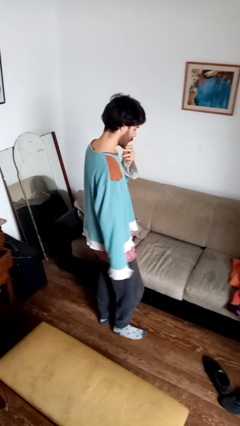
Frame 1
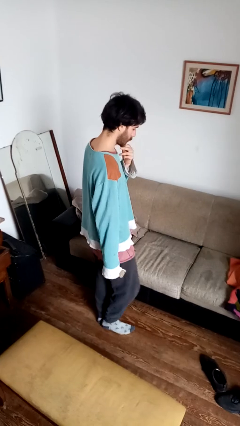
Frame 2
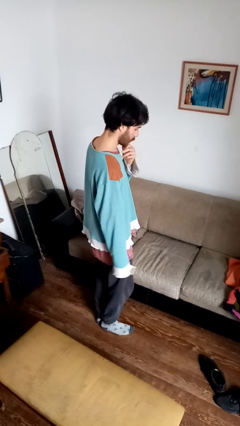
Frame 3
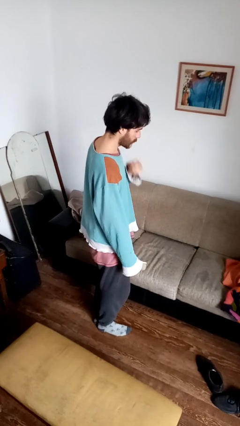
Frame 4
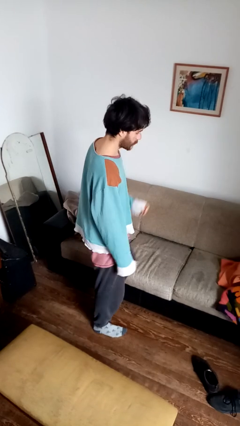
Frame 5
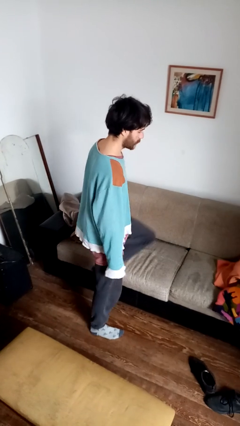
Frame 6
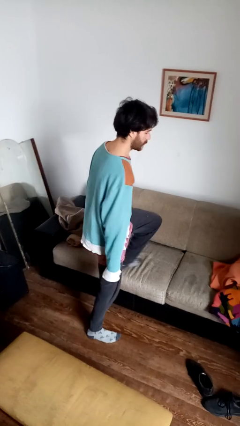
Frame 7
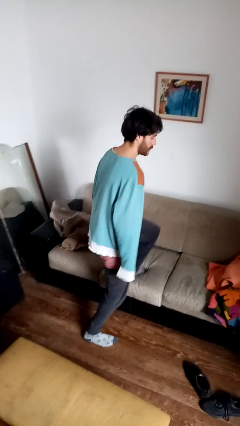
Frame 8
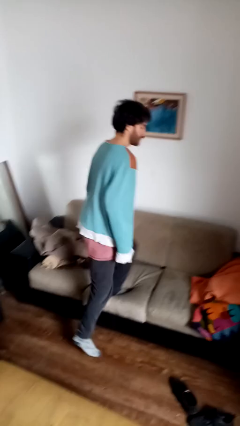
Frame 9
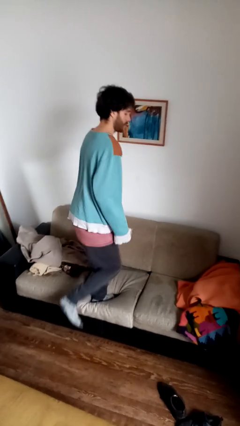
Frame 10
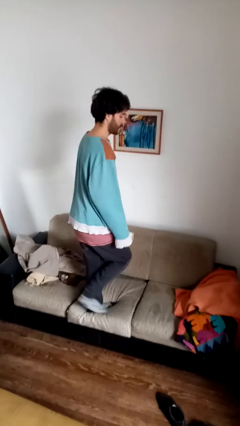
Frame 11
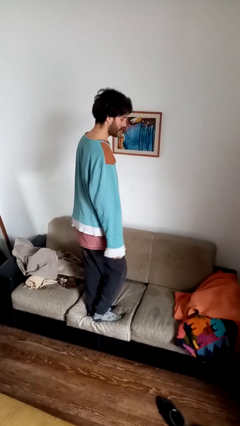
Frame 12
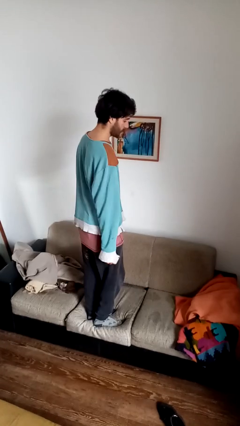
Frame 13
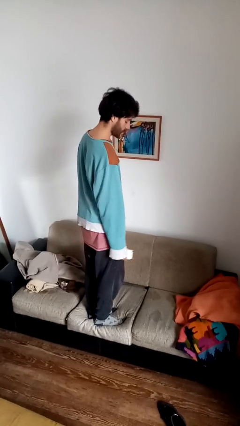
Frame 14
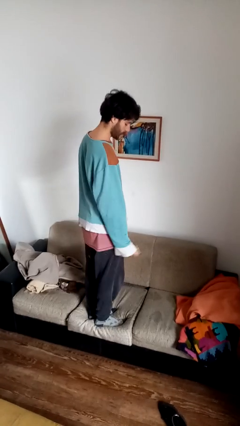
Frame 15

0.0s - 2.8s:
person climbs on couch

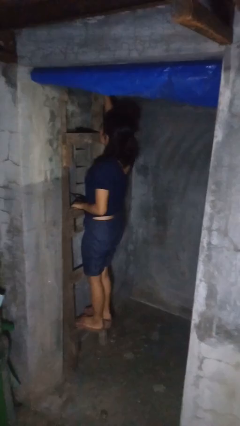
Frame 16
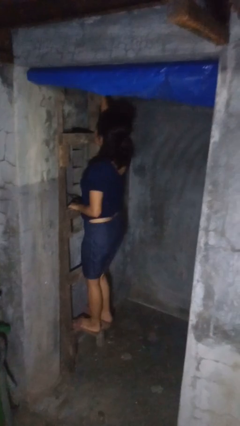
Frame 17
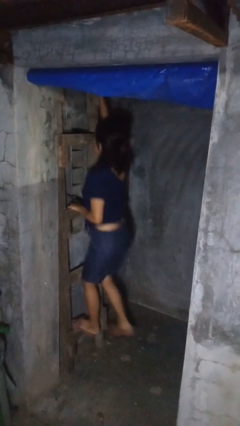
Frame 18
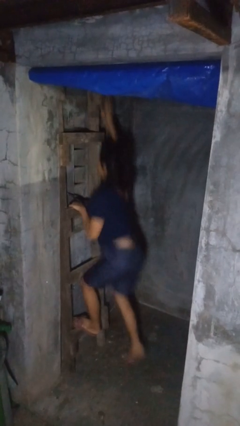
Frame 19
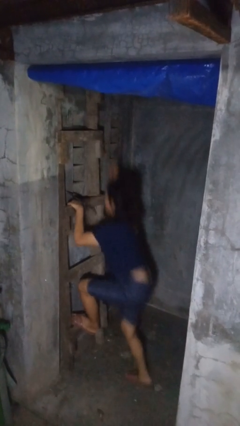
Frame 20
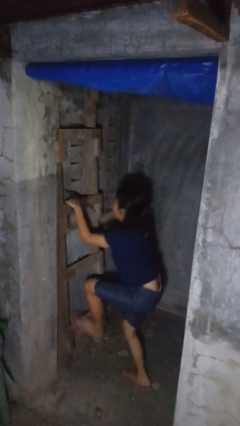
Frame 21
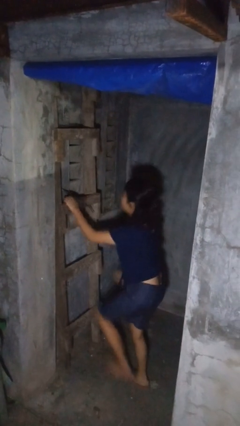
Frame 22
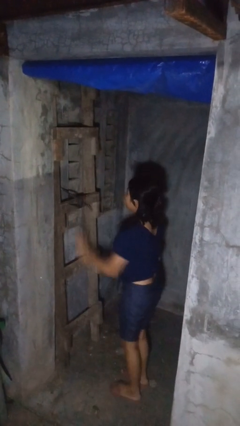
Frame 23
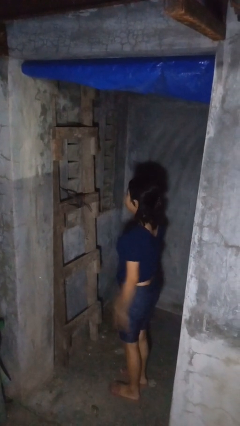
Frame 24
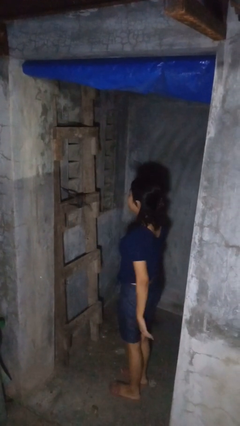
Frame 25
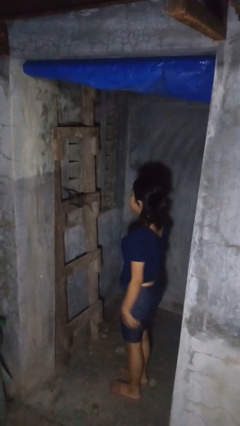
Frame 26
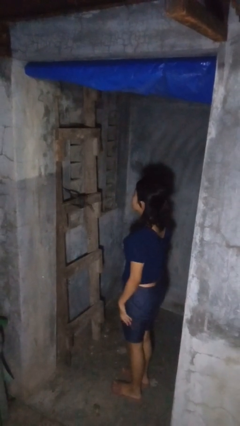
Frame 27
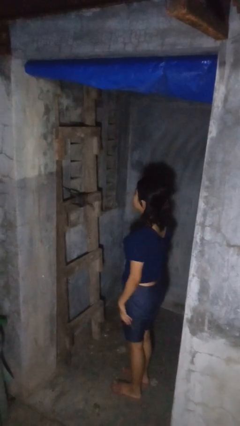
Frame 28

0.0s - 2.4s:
person climbs down ladder

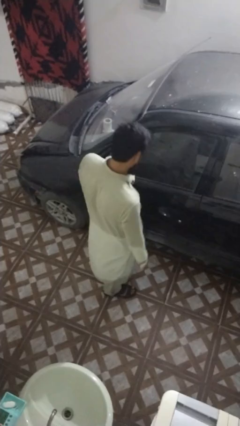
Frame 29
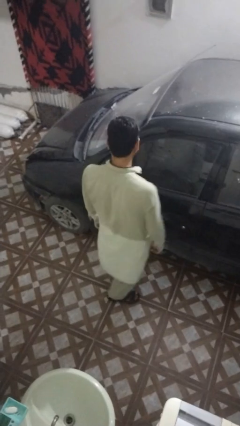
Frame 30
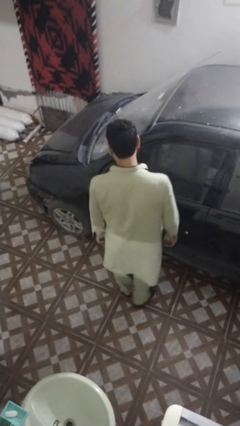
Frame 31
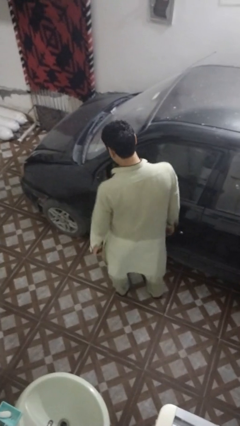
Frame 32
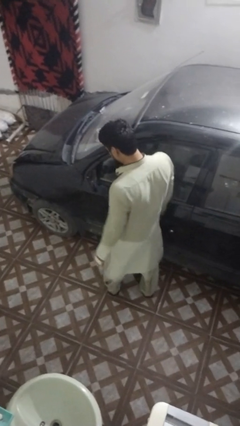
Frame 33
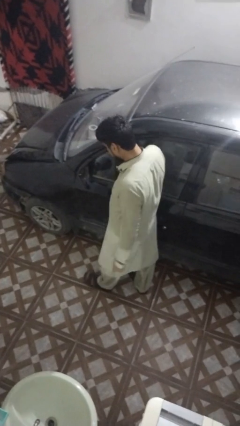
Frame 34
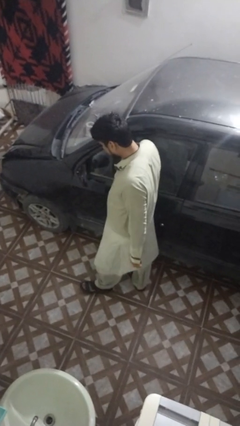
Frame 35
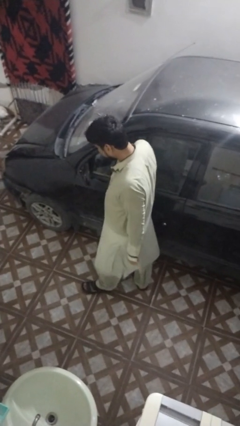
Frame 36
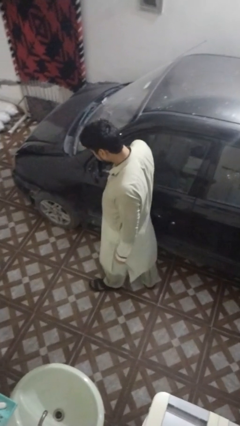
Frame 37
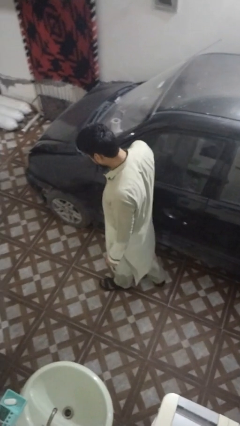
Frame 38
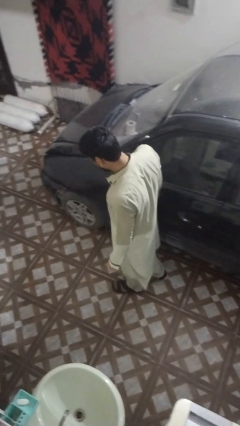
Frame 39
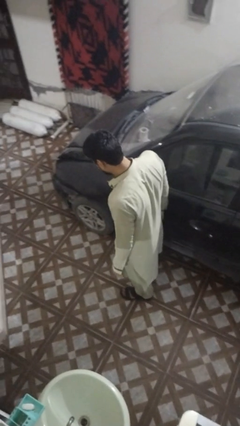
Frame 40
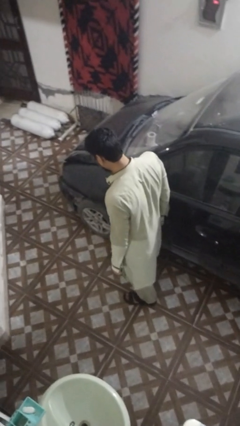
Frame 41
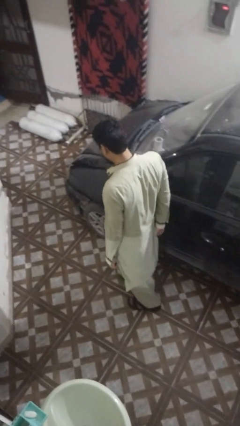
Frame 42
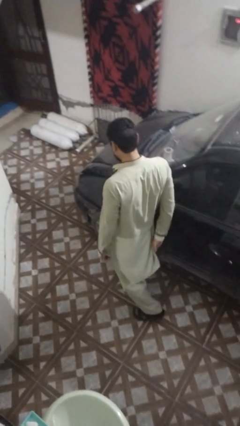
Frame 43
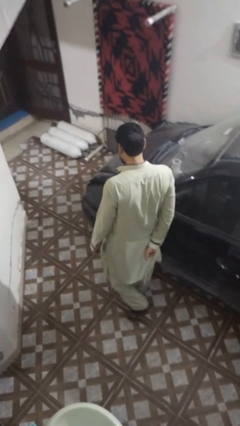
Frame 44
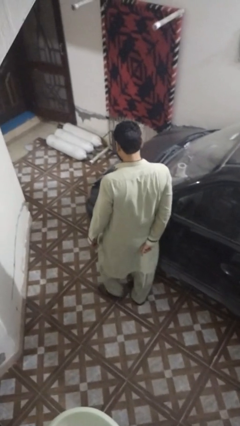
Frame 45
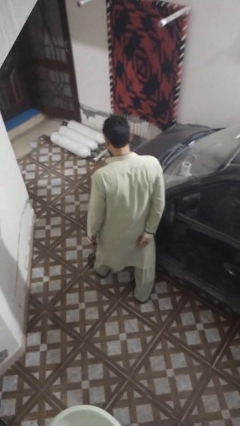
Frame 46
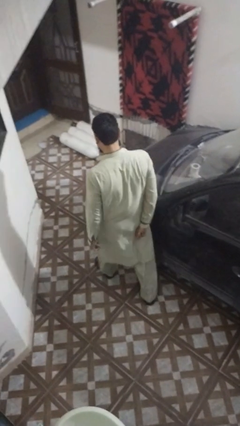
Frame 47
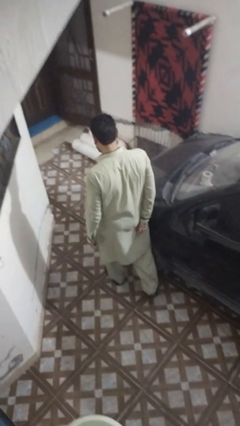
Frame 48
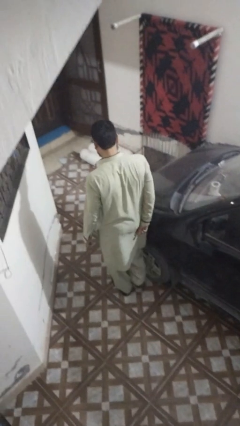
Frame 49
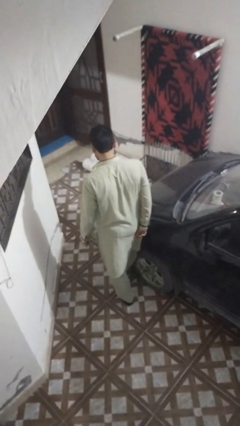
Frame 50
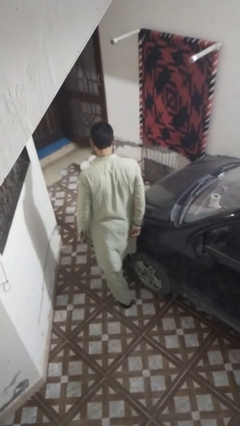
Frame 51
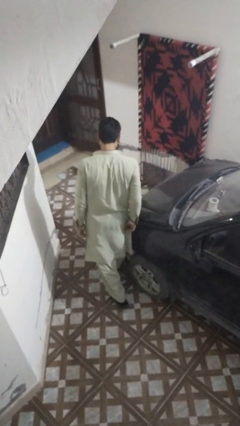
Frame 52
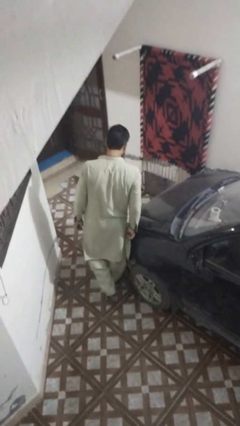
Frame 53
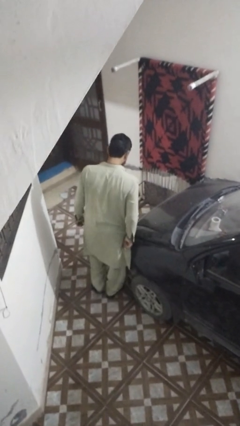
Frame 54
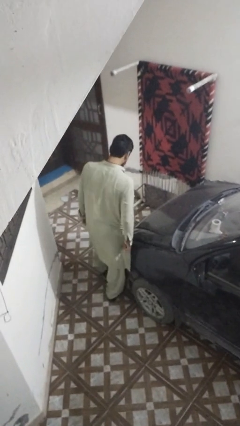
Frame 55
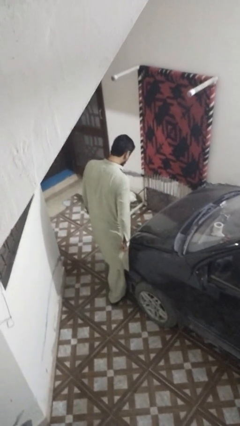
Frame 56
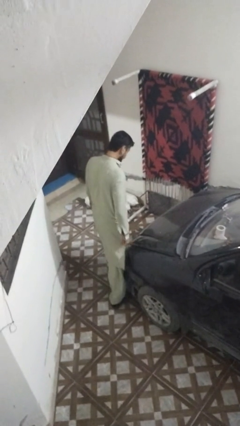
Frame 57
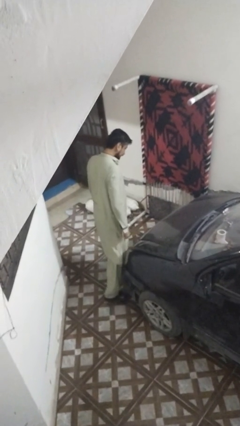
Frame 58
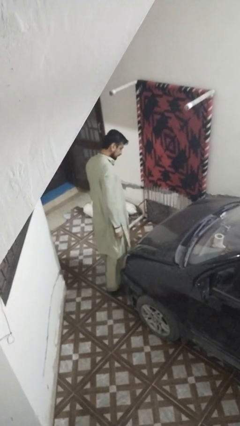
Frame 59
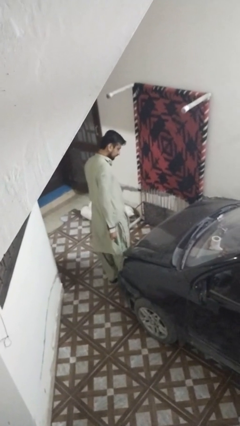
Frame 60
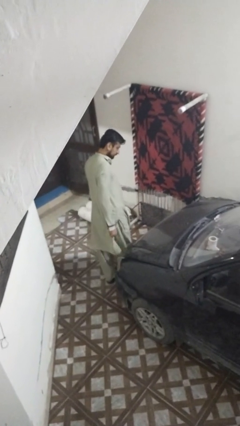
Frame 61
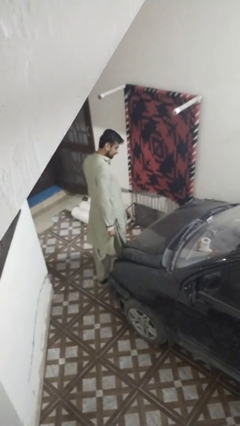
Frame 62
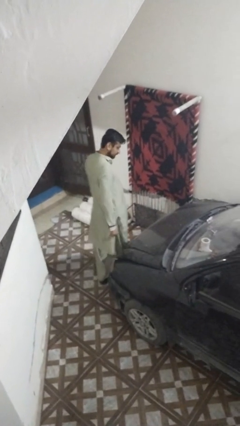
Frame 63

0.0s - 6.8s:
person walks around car

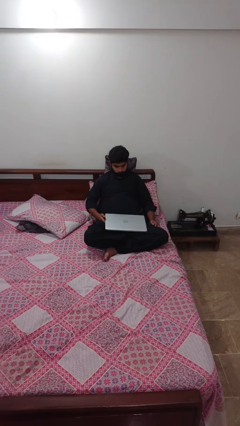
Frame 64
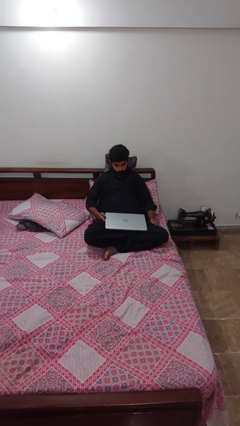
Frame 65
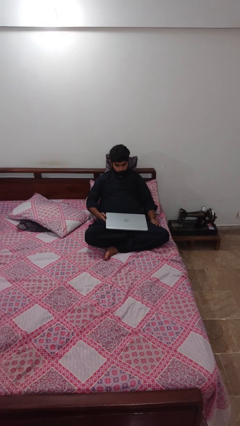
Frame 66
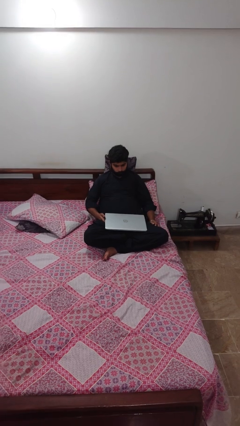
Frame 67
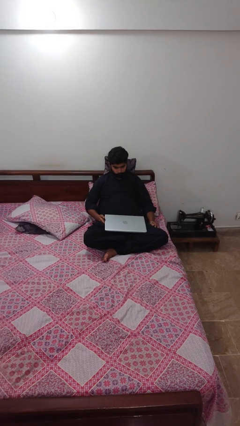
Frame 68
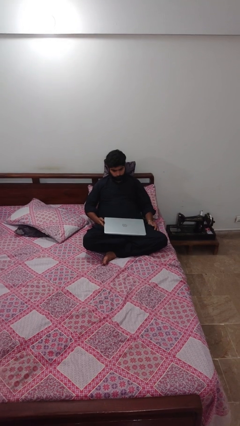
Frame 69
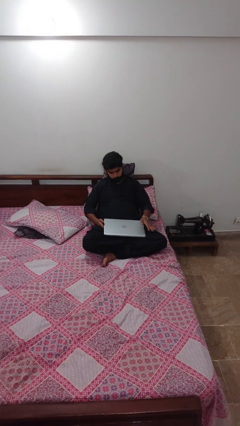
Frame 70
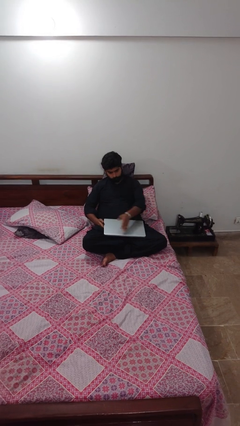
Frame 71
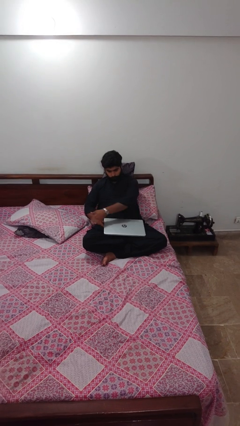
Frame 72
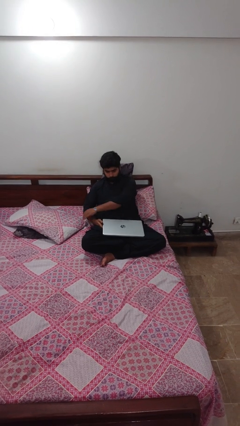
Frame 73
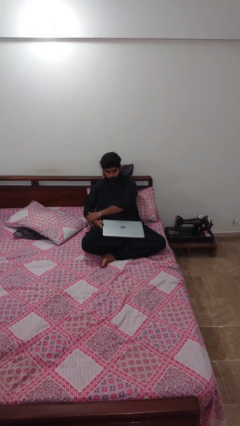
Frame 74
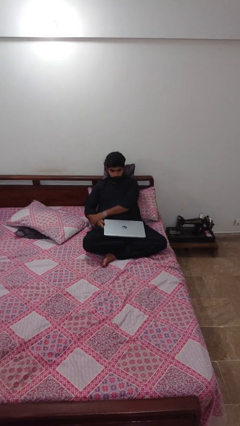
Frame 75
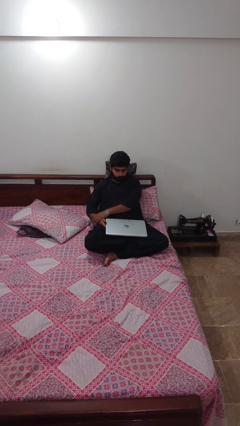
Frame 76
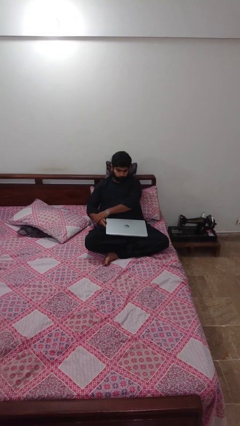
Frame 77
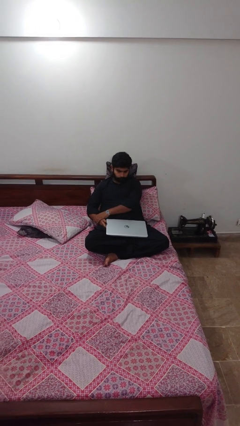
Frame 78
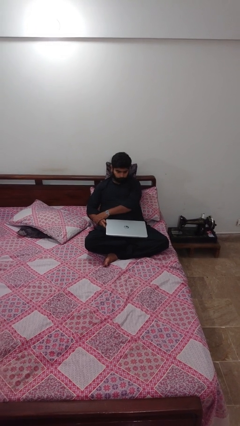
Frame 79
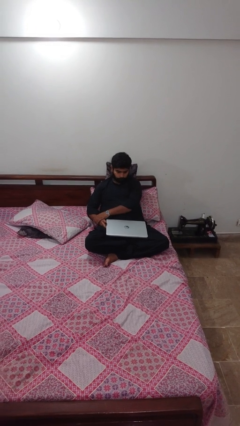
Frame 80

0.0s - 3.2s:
person waves hand over object

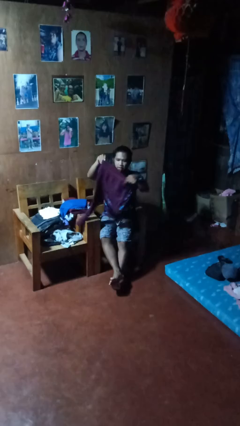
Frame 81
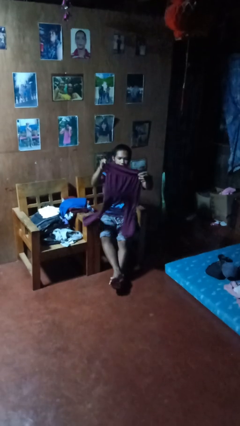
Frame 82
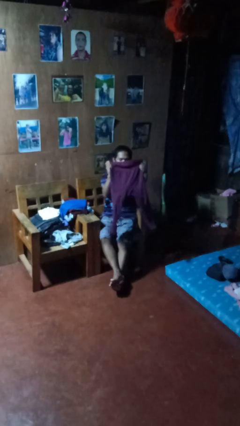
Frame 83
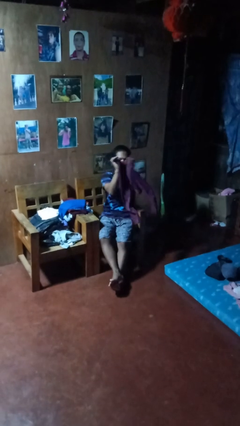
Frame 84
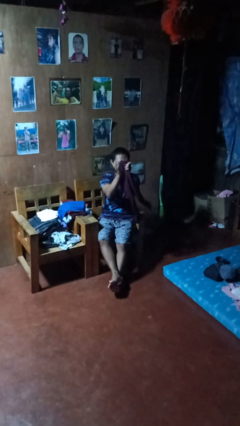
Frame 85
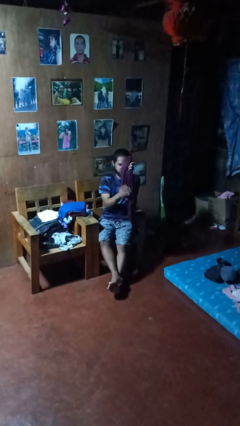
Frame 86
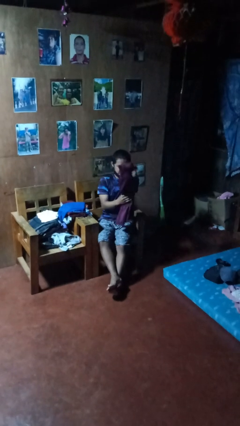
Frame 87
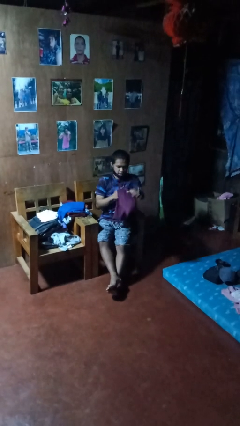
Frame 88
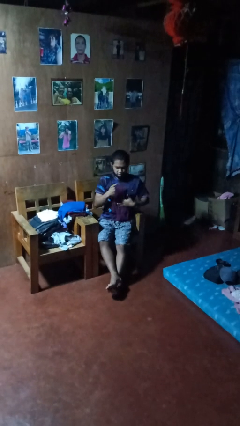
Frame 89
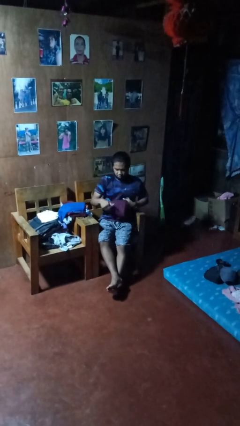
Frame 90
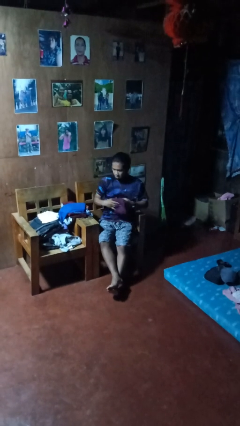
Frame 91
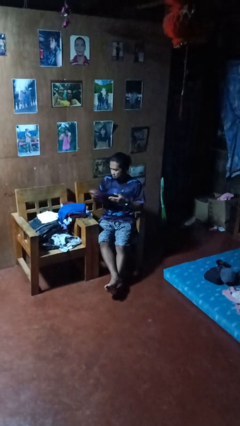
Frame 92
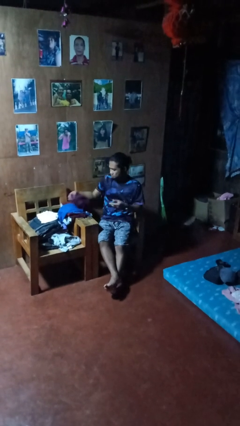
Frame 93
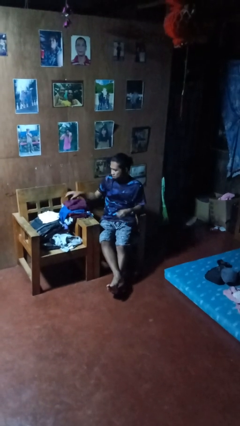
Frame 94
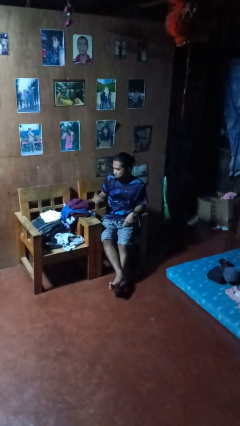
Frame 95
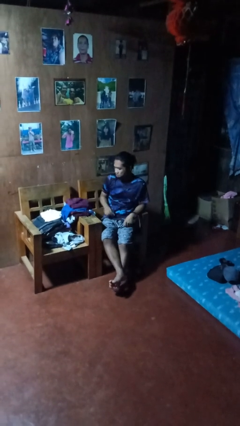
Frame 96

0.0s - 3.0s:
person folds pants
